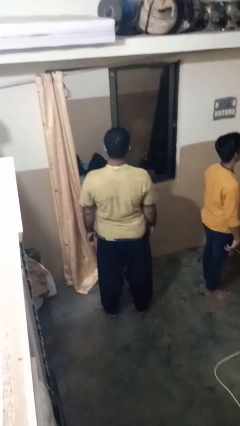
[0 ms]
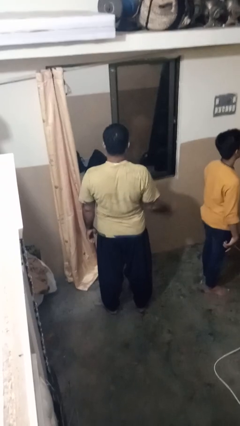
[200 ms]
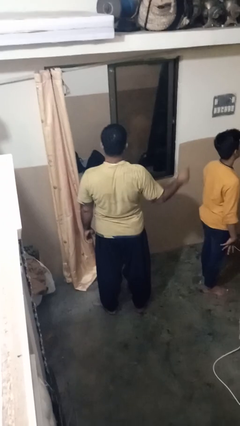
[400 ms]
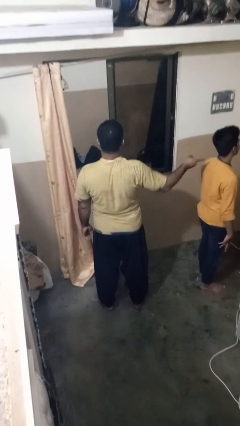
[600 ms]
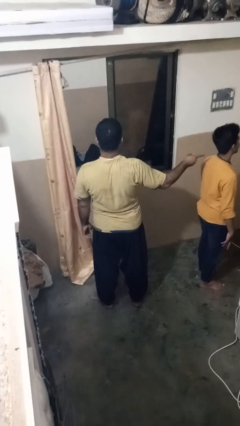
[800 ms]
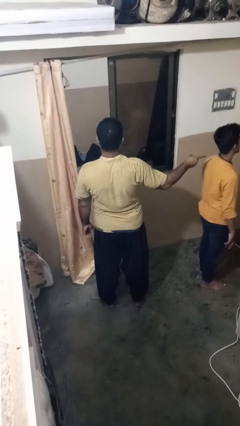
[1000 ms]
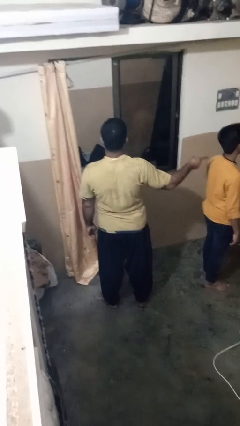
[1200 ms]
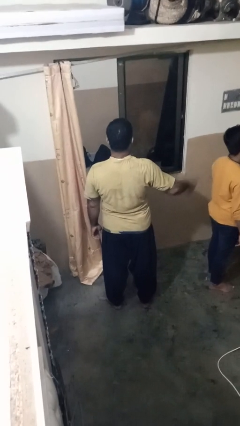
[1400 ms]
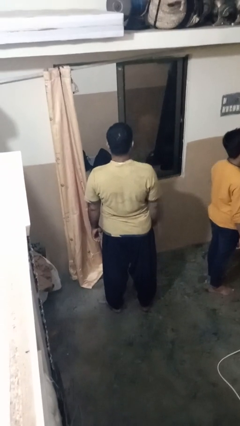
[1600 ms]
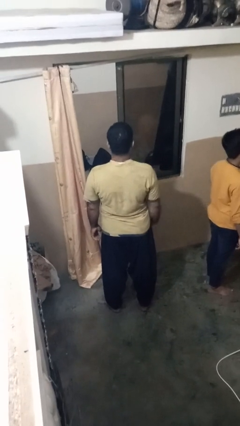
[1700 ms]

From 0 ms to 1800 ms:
person points at person

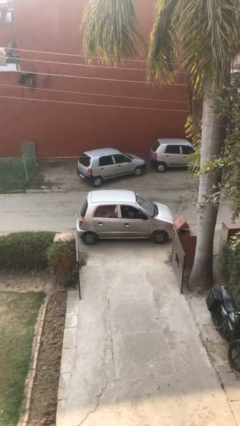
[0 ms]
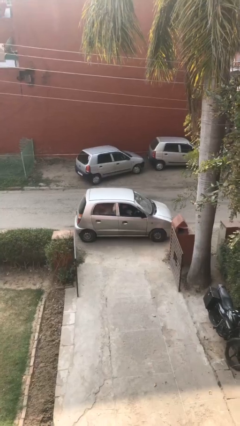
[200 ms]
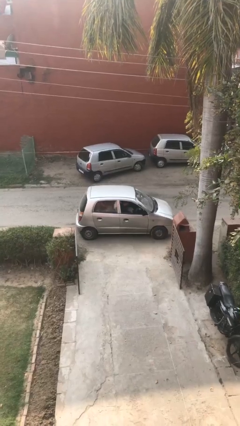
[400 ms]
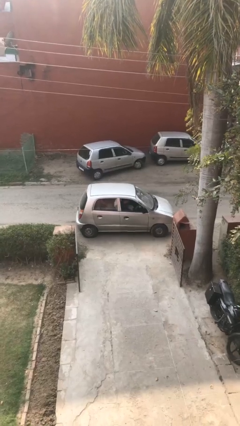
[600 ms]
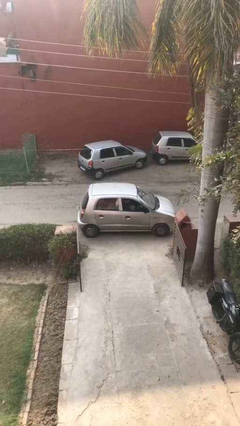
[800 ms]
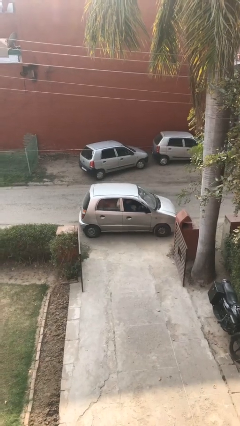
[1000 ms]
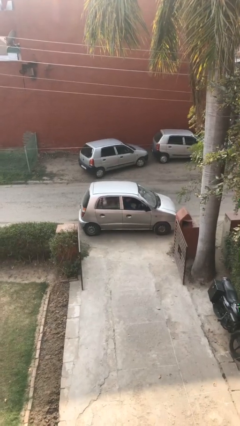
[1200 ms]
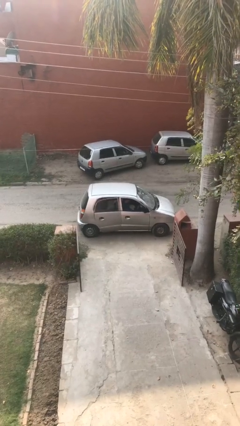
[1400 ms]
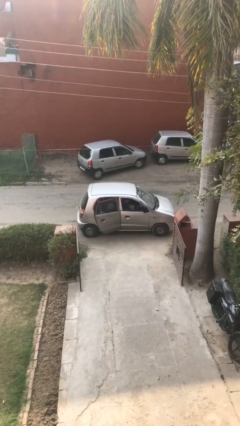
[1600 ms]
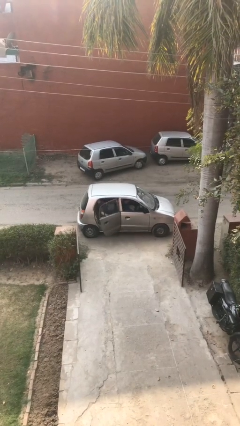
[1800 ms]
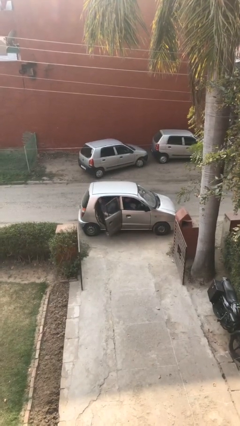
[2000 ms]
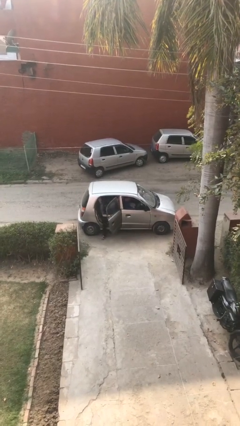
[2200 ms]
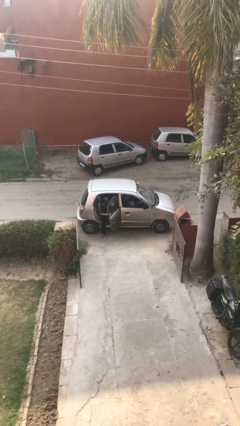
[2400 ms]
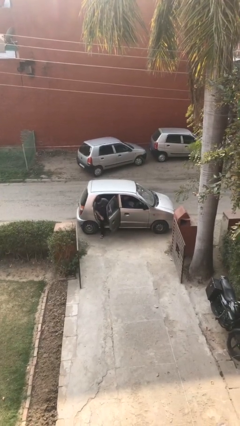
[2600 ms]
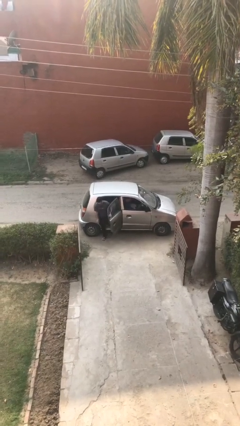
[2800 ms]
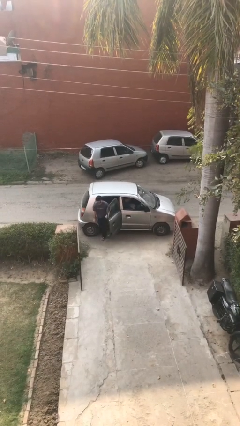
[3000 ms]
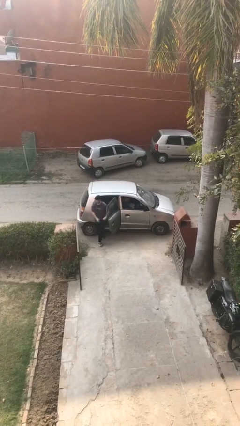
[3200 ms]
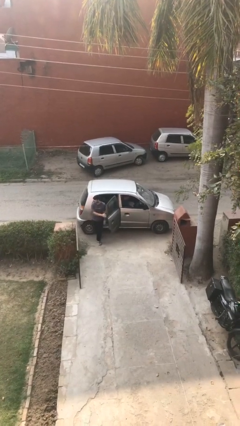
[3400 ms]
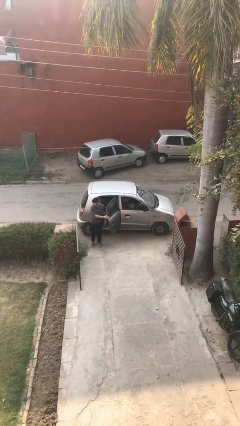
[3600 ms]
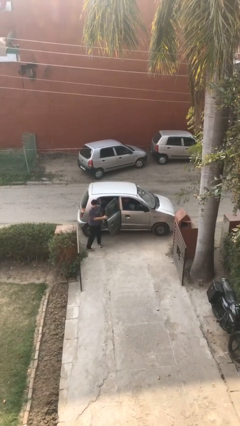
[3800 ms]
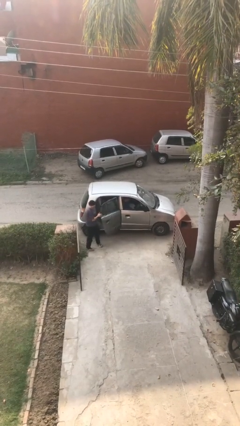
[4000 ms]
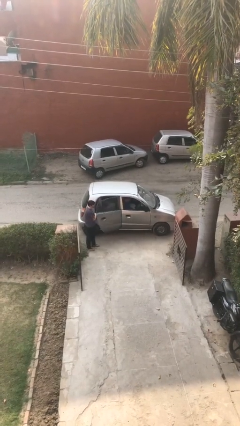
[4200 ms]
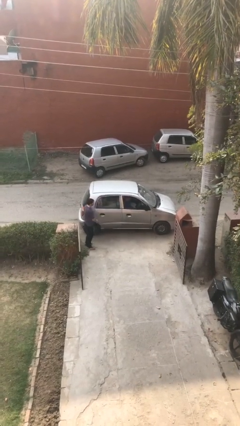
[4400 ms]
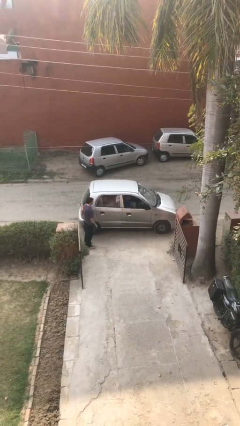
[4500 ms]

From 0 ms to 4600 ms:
car drops off person

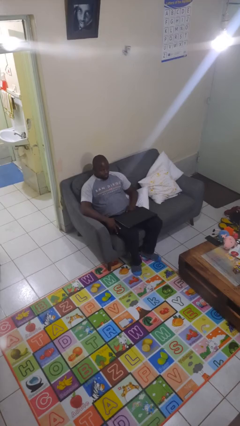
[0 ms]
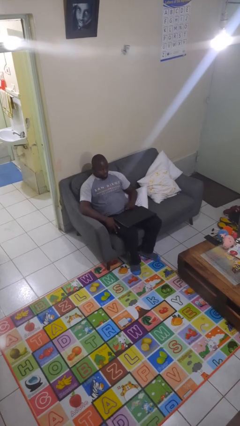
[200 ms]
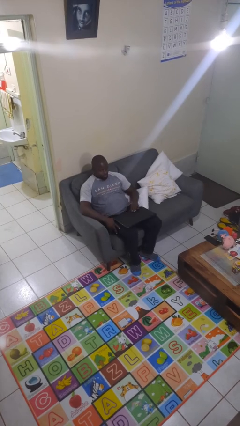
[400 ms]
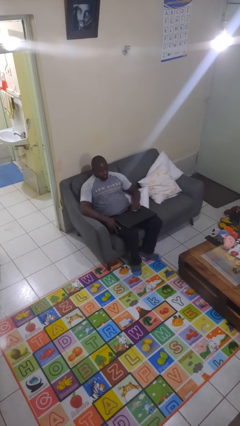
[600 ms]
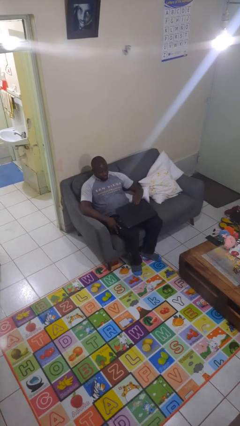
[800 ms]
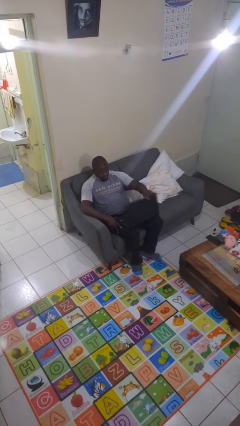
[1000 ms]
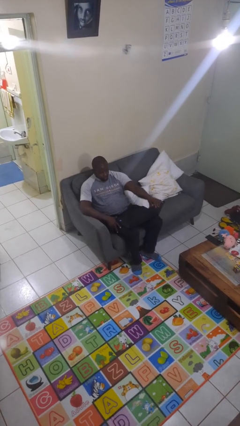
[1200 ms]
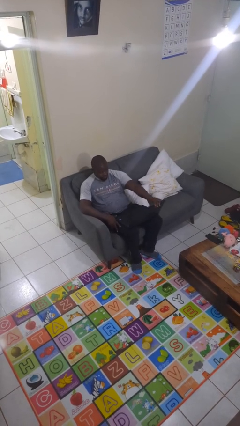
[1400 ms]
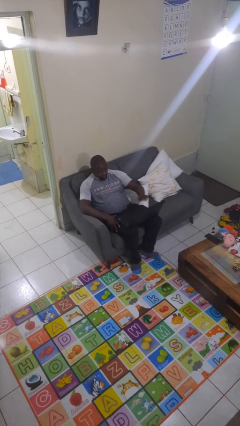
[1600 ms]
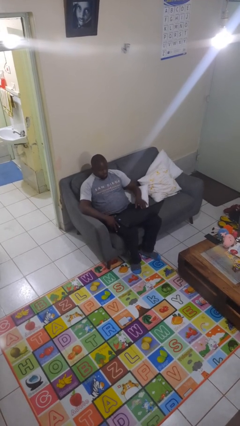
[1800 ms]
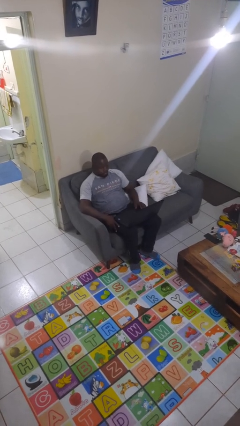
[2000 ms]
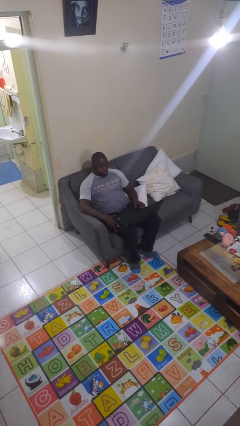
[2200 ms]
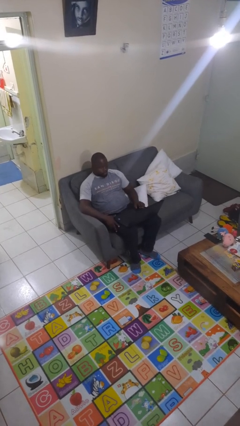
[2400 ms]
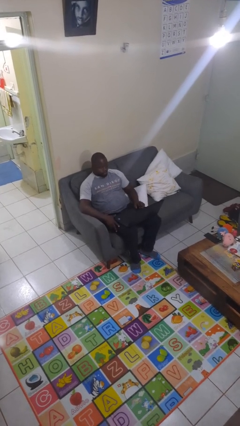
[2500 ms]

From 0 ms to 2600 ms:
person opens laptop

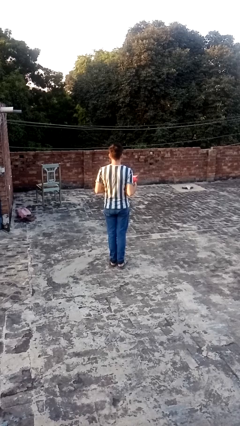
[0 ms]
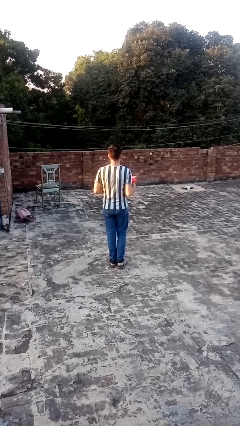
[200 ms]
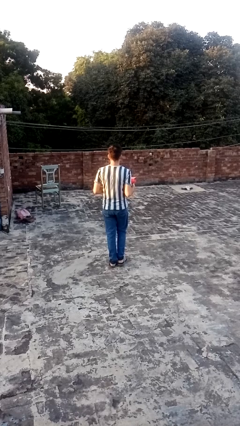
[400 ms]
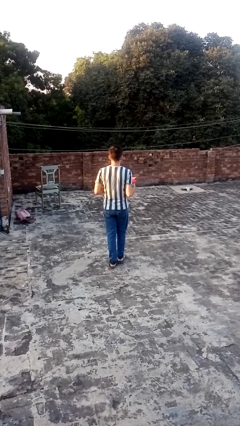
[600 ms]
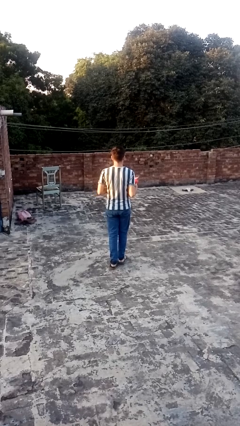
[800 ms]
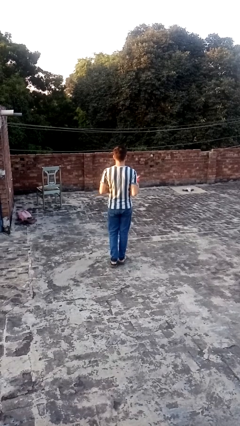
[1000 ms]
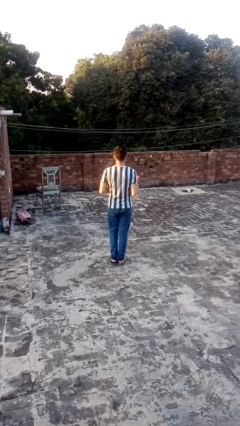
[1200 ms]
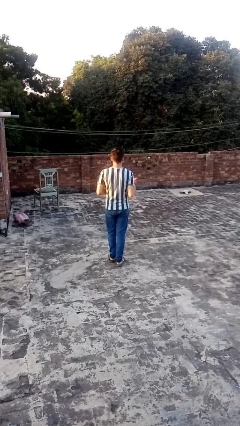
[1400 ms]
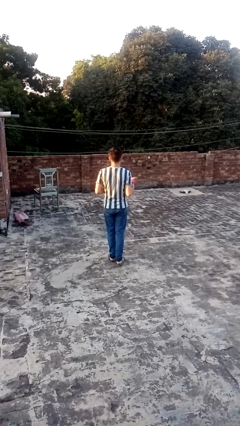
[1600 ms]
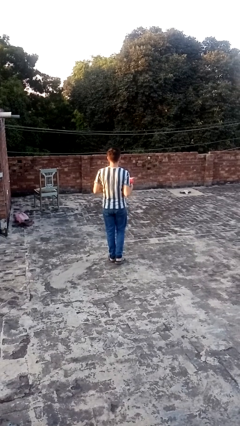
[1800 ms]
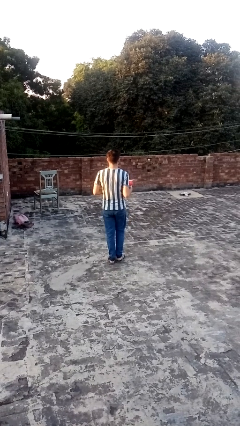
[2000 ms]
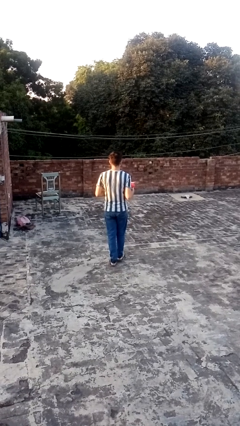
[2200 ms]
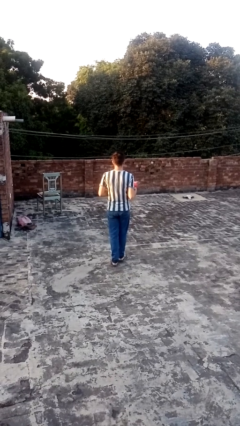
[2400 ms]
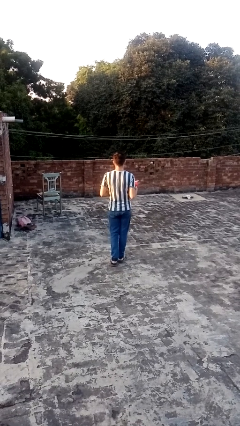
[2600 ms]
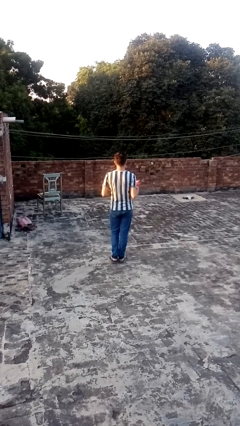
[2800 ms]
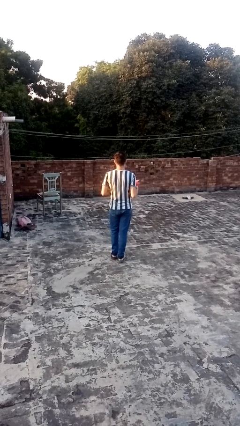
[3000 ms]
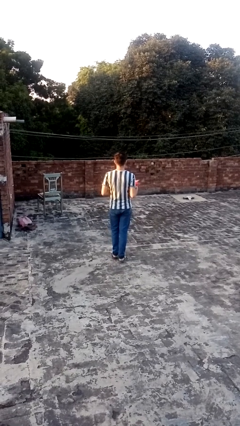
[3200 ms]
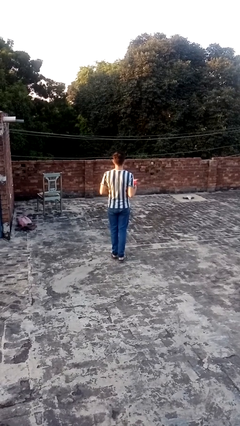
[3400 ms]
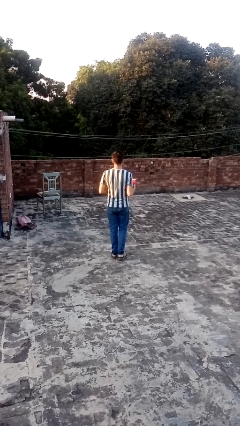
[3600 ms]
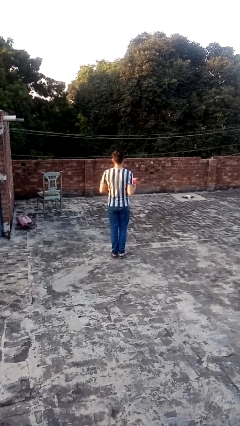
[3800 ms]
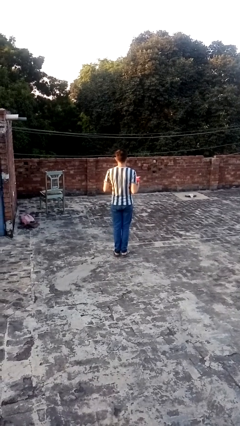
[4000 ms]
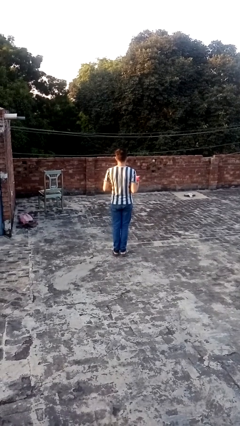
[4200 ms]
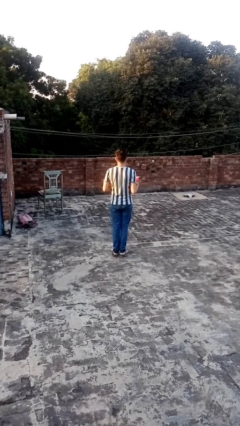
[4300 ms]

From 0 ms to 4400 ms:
person carries laundry basket

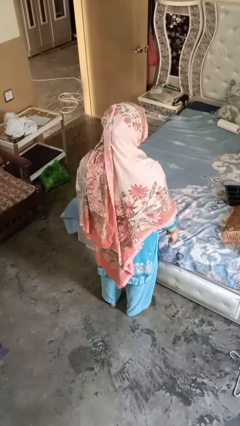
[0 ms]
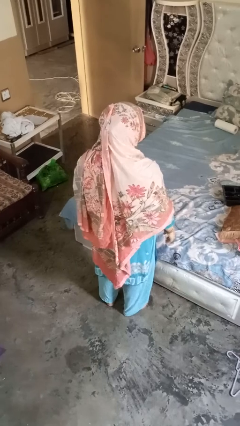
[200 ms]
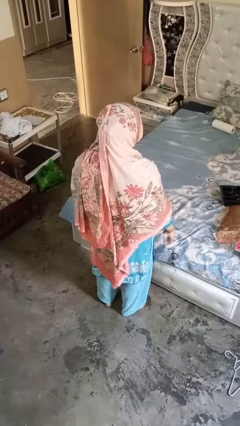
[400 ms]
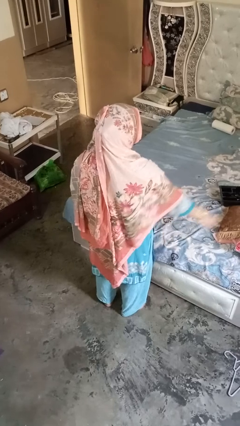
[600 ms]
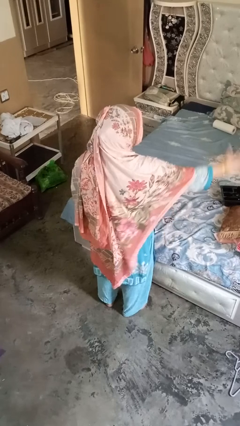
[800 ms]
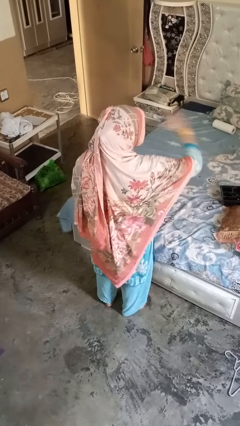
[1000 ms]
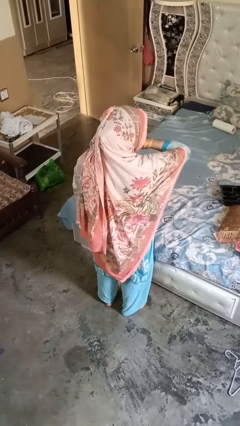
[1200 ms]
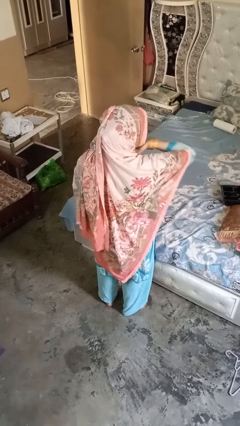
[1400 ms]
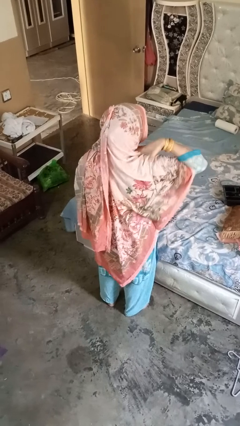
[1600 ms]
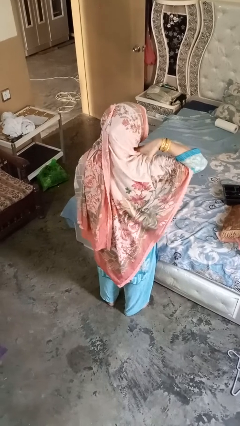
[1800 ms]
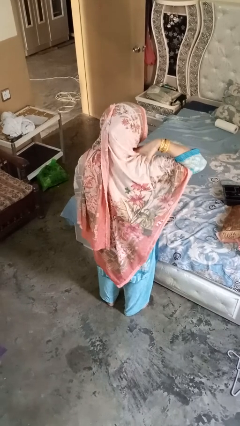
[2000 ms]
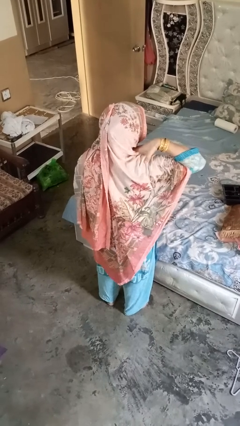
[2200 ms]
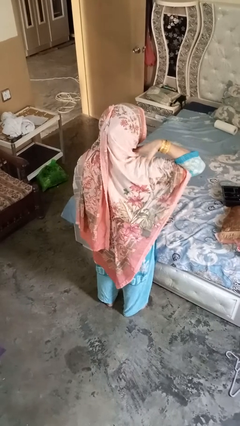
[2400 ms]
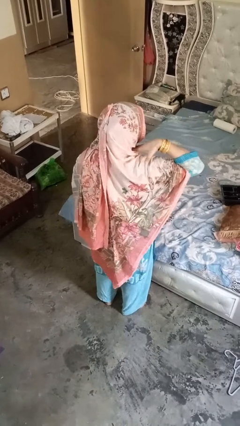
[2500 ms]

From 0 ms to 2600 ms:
person gestures cut

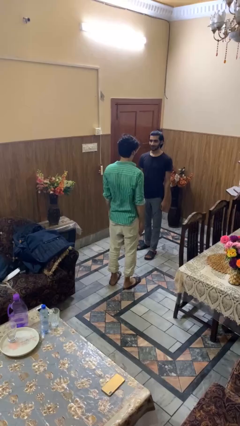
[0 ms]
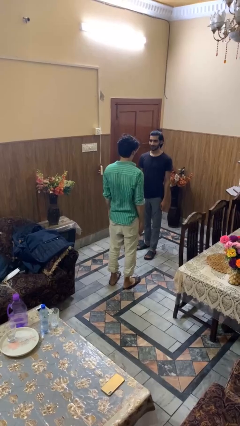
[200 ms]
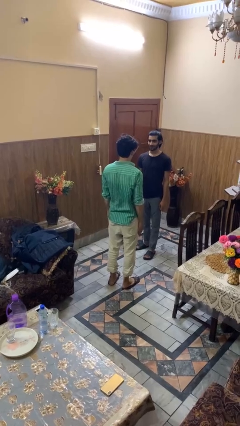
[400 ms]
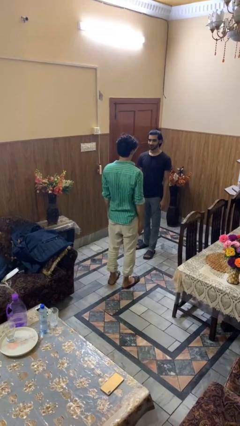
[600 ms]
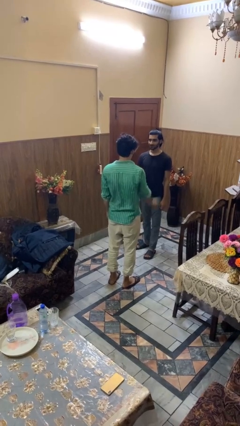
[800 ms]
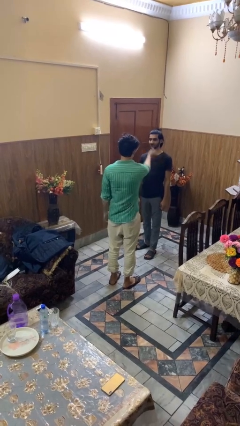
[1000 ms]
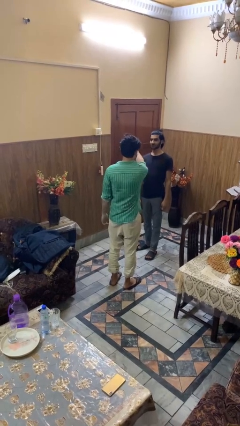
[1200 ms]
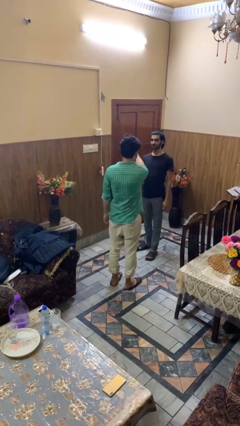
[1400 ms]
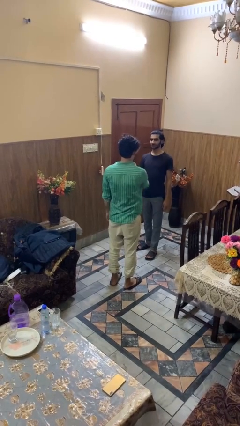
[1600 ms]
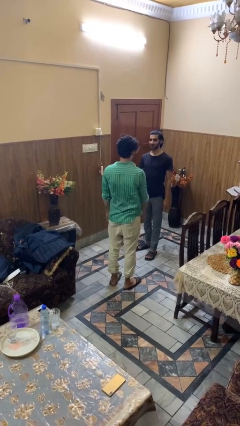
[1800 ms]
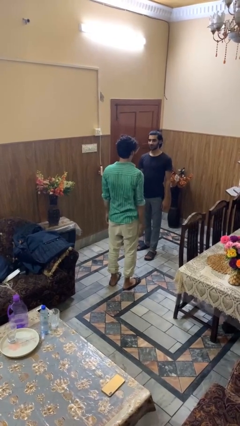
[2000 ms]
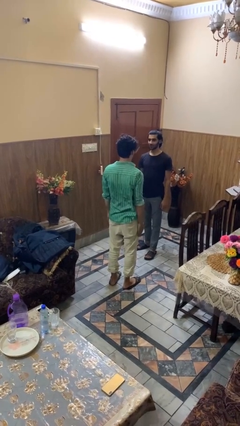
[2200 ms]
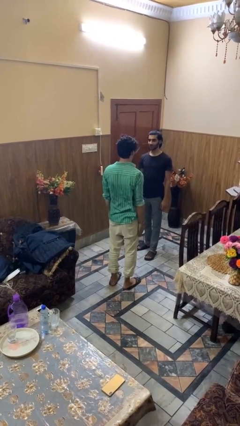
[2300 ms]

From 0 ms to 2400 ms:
person shoves person
